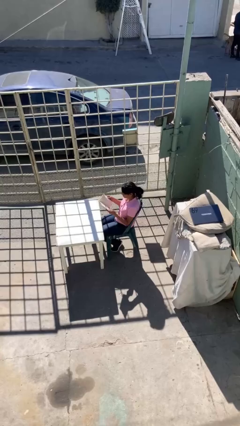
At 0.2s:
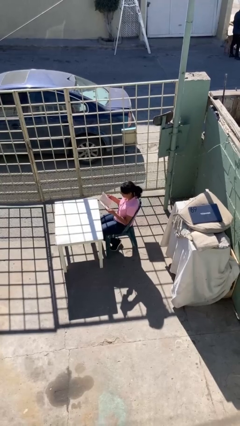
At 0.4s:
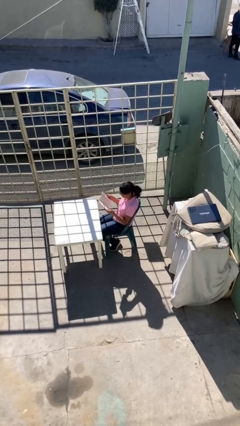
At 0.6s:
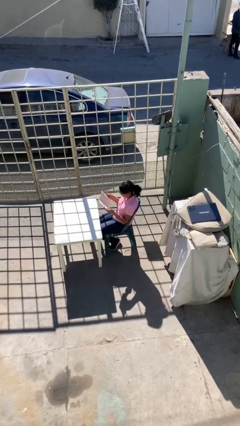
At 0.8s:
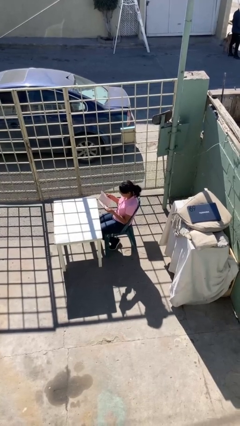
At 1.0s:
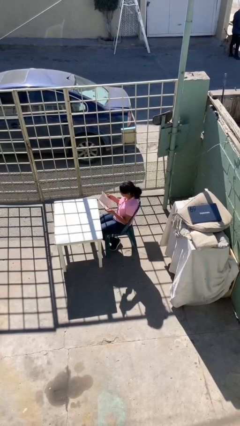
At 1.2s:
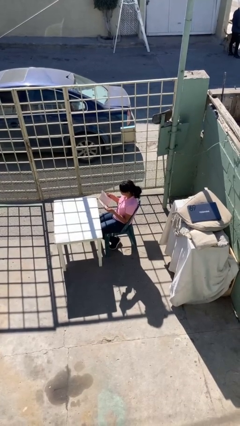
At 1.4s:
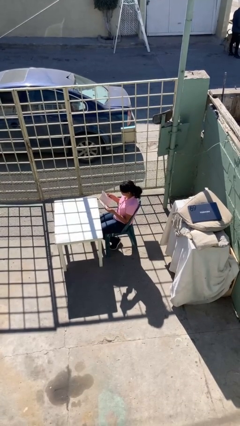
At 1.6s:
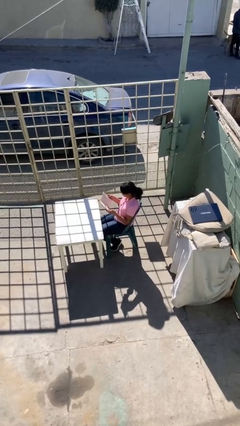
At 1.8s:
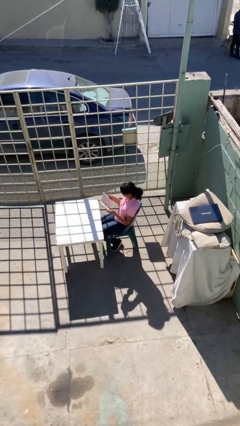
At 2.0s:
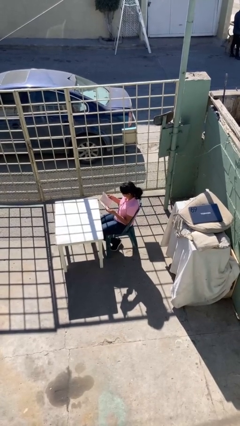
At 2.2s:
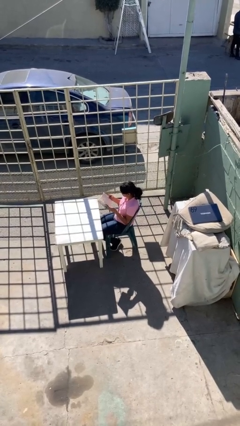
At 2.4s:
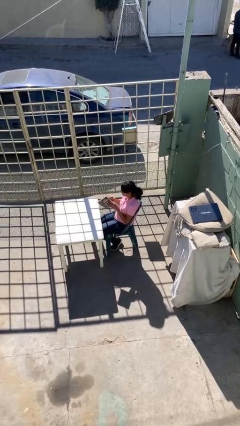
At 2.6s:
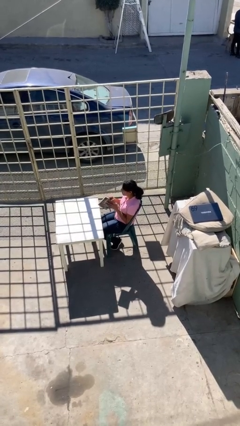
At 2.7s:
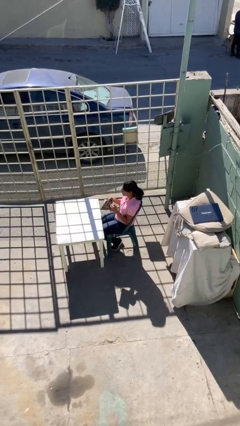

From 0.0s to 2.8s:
person reads document

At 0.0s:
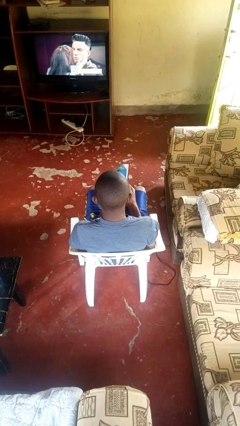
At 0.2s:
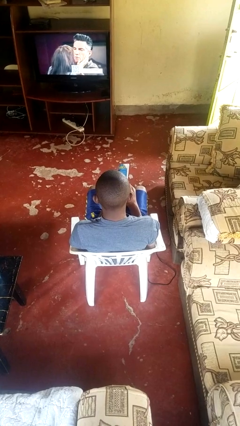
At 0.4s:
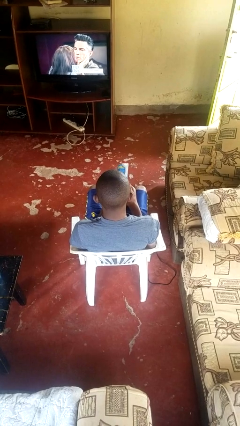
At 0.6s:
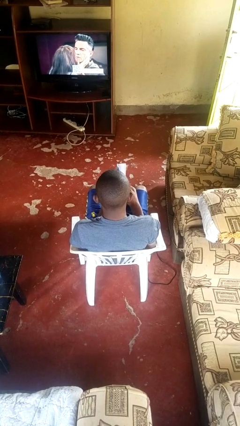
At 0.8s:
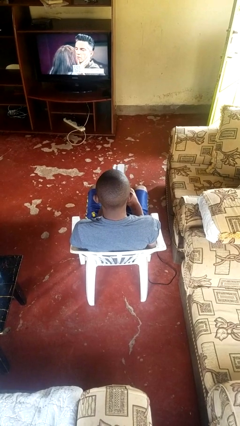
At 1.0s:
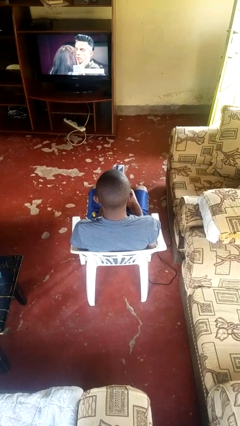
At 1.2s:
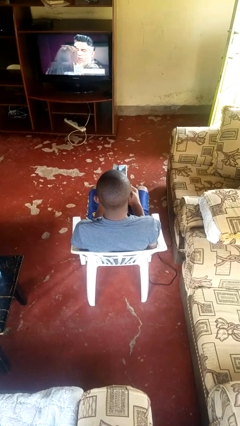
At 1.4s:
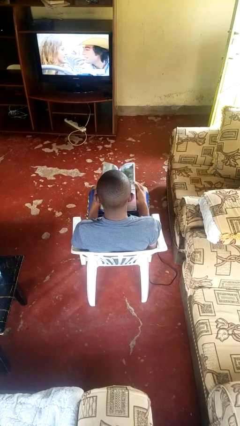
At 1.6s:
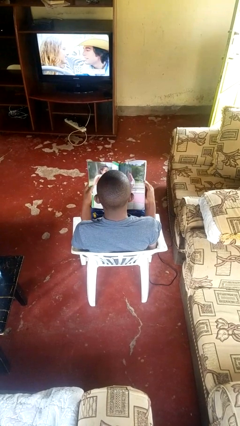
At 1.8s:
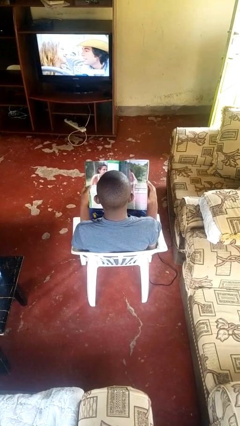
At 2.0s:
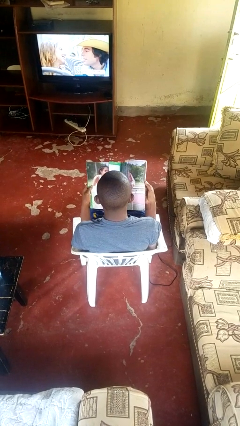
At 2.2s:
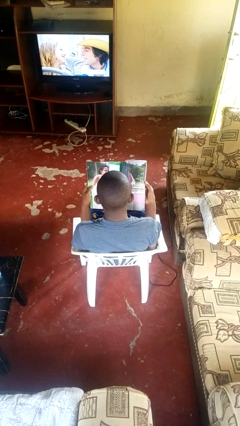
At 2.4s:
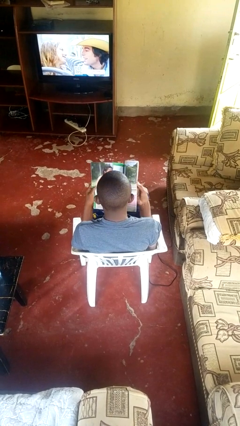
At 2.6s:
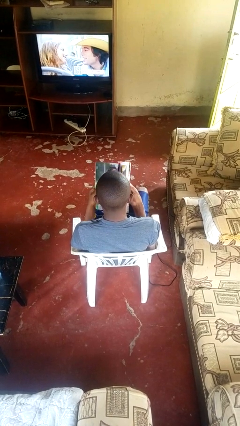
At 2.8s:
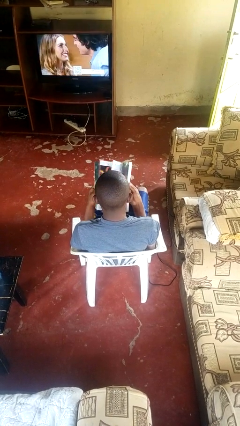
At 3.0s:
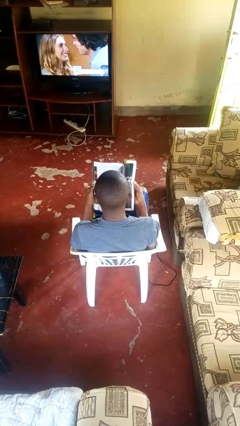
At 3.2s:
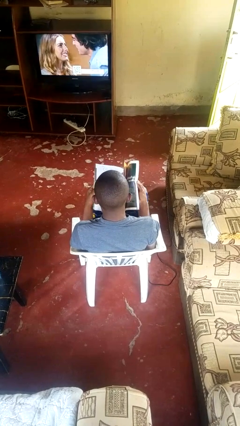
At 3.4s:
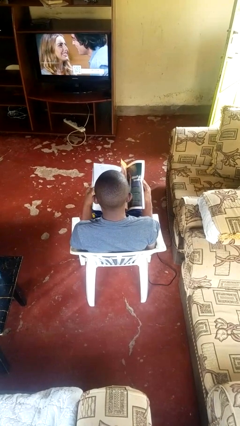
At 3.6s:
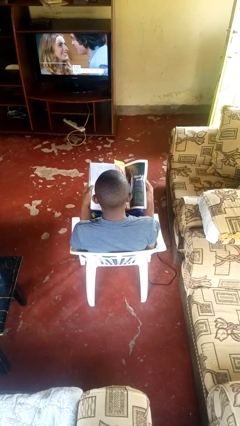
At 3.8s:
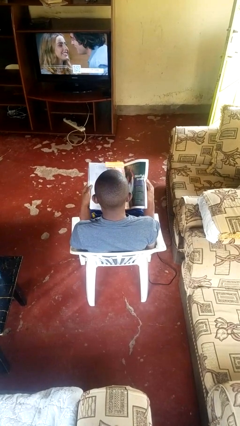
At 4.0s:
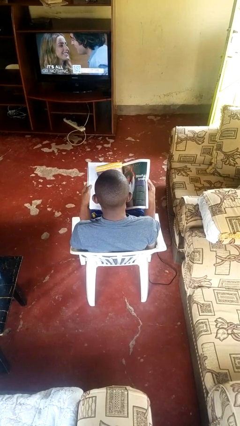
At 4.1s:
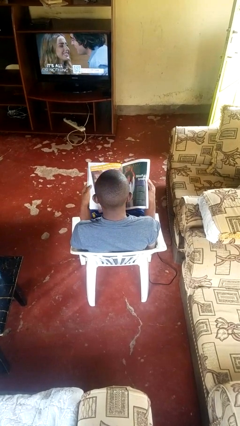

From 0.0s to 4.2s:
person reads magazine

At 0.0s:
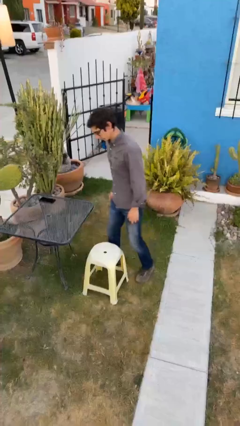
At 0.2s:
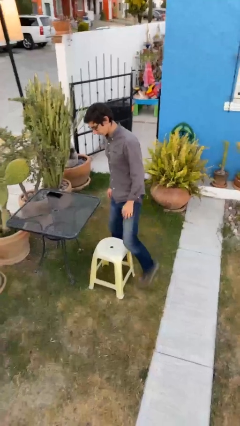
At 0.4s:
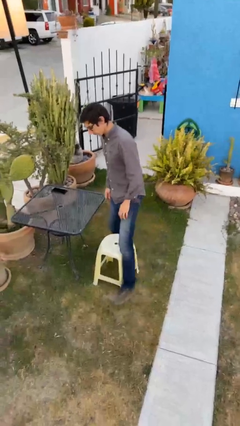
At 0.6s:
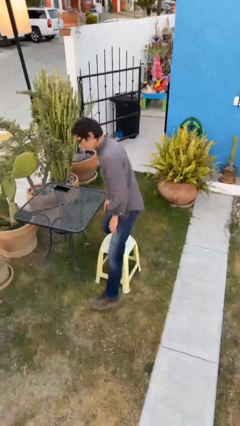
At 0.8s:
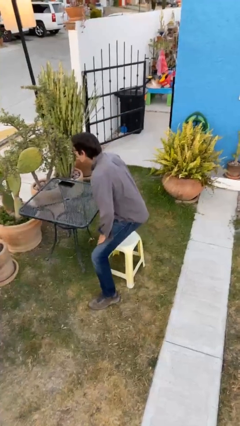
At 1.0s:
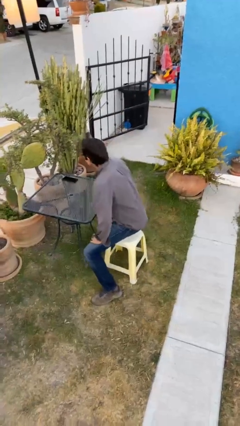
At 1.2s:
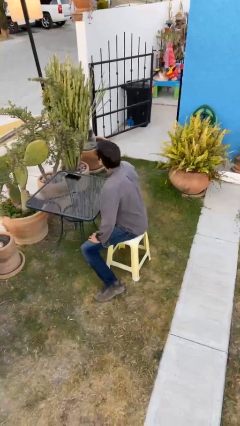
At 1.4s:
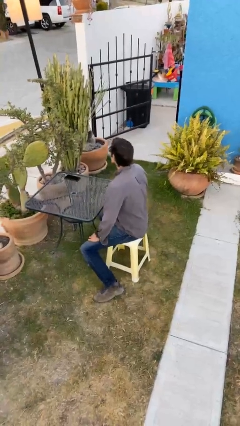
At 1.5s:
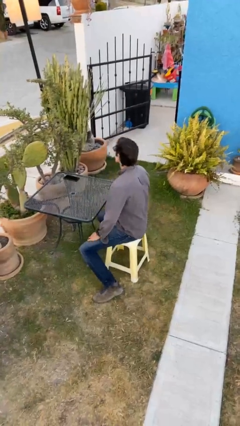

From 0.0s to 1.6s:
person sits down

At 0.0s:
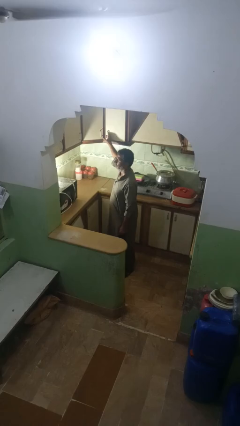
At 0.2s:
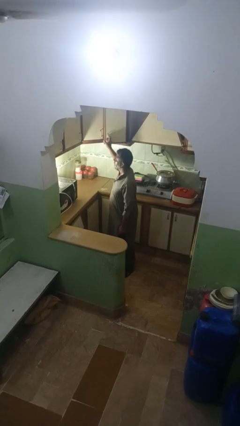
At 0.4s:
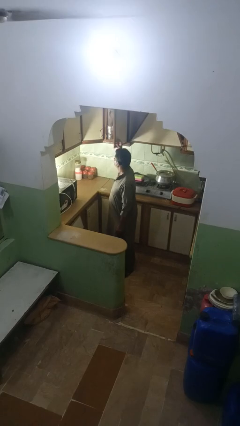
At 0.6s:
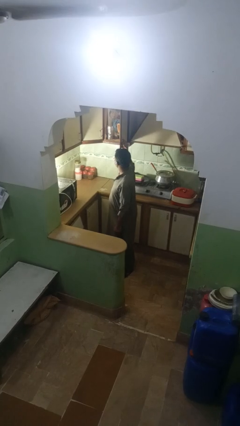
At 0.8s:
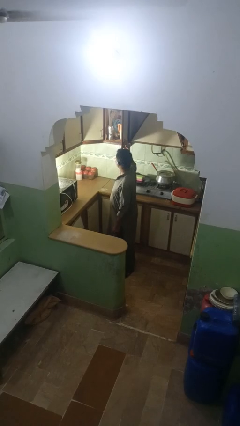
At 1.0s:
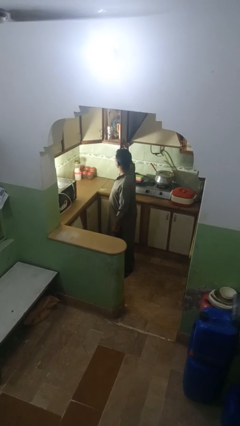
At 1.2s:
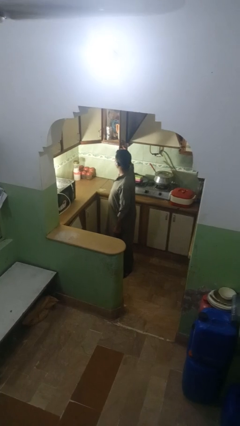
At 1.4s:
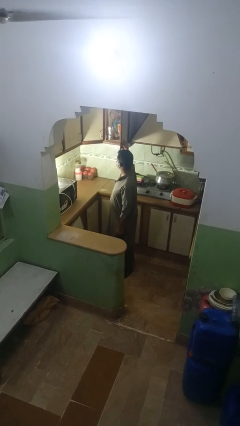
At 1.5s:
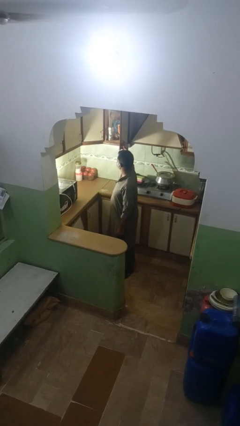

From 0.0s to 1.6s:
person opens kitchen drawer

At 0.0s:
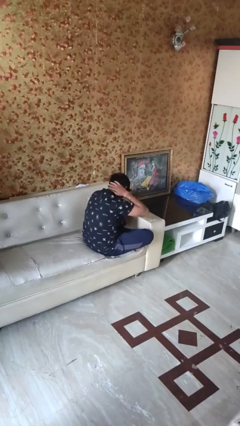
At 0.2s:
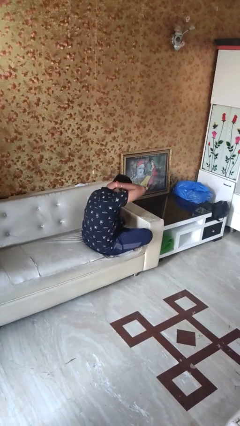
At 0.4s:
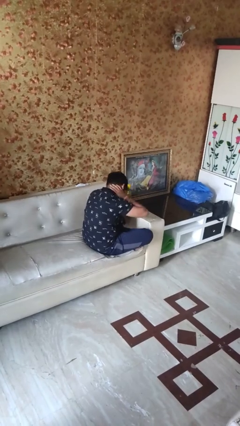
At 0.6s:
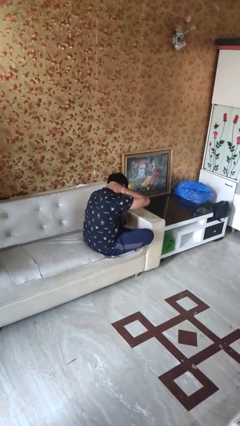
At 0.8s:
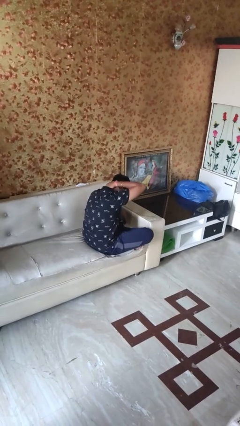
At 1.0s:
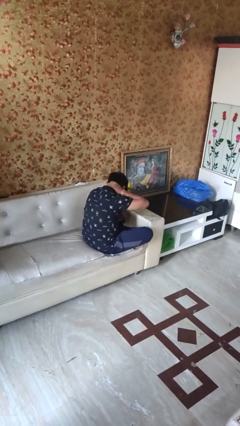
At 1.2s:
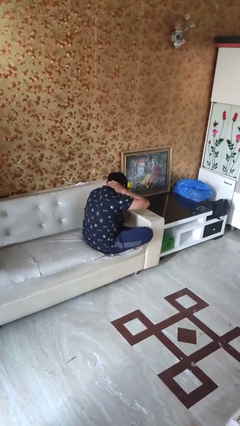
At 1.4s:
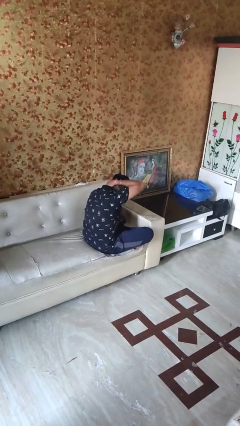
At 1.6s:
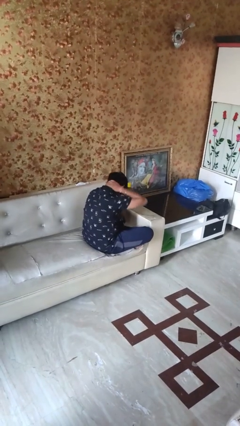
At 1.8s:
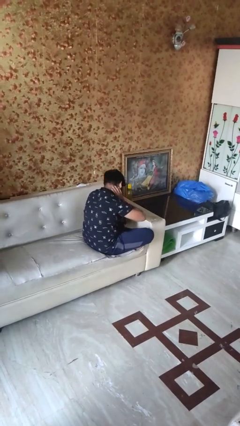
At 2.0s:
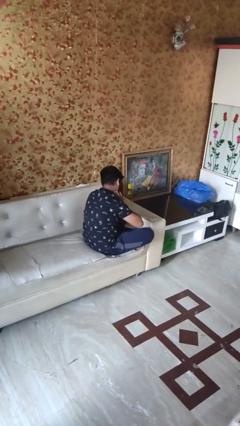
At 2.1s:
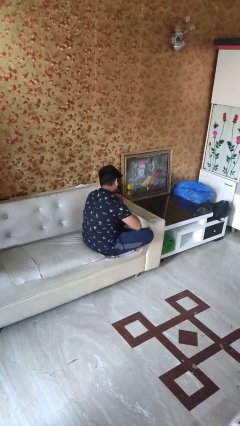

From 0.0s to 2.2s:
person rubs neck

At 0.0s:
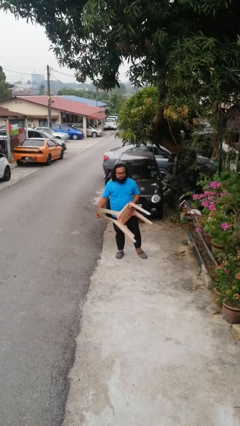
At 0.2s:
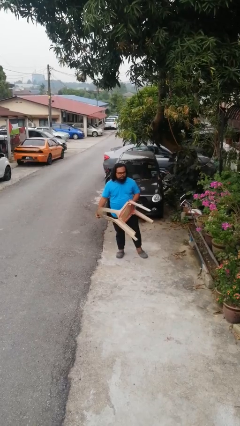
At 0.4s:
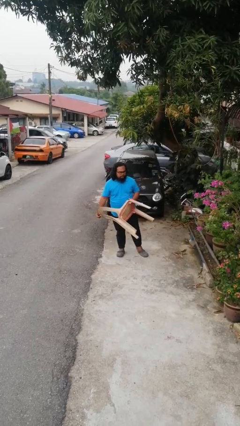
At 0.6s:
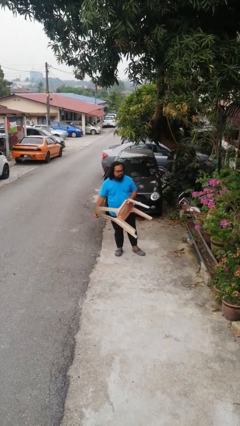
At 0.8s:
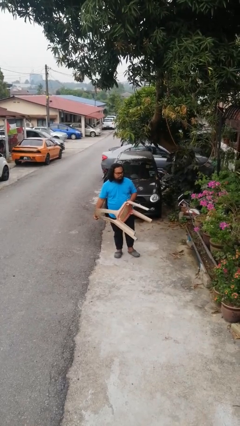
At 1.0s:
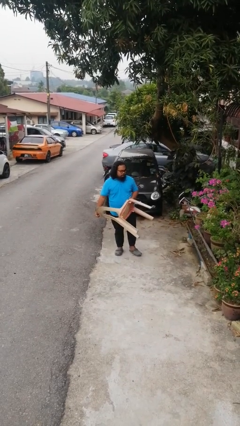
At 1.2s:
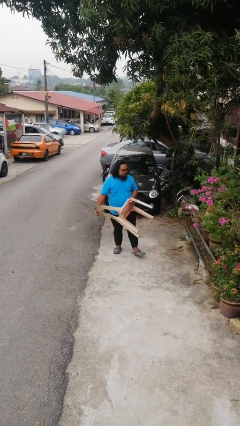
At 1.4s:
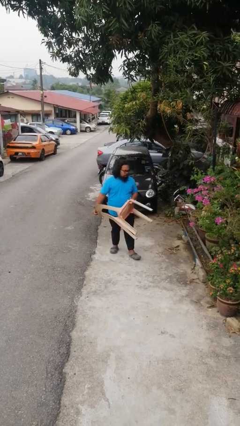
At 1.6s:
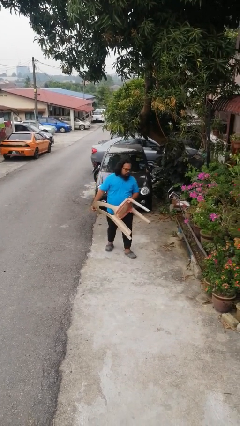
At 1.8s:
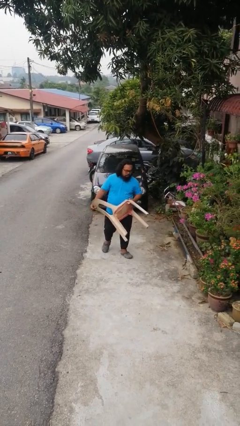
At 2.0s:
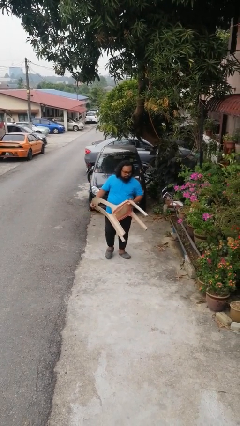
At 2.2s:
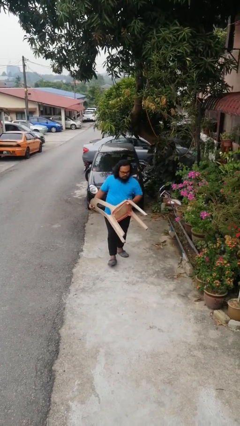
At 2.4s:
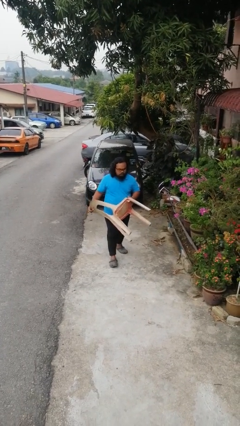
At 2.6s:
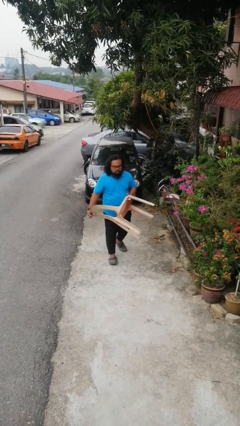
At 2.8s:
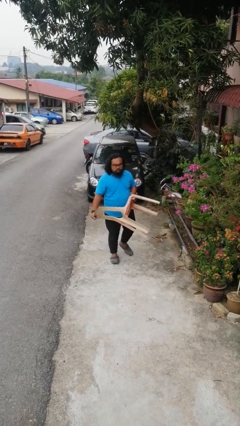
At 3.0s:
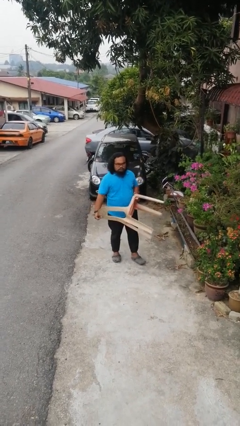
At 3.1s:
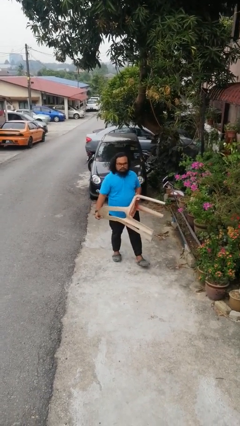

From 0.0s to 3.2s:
person carries furniture

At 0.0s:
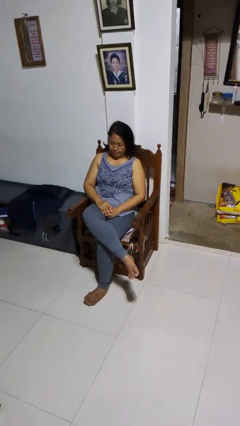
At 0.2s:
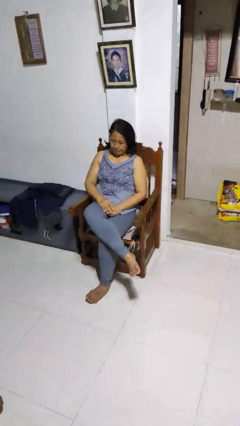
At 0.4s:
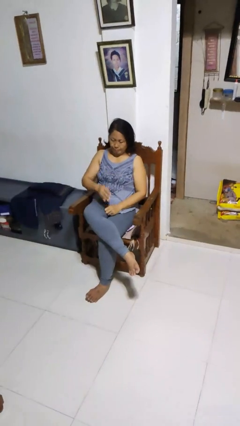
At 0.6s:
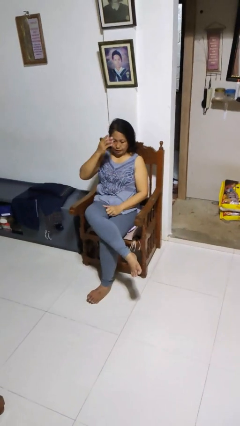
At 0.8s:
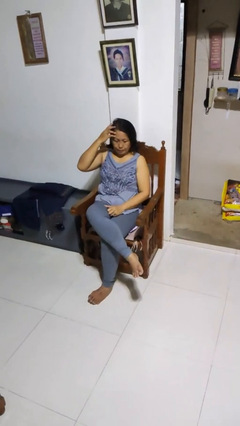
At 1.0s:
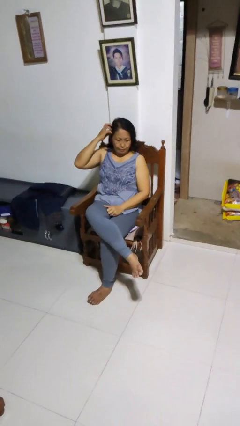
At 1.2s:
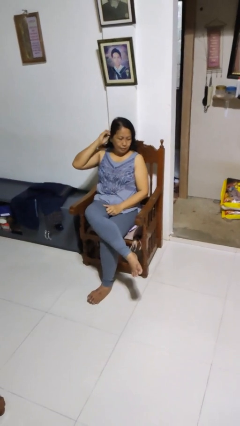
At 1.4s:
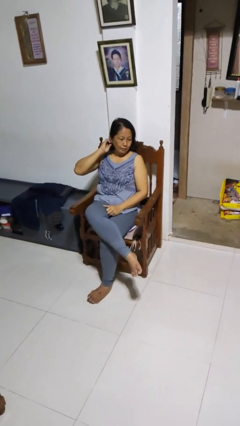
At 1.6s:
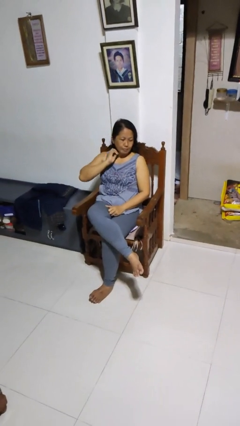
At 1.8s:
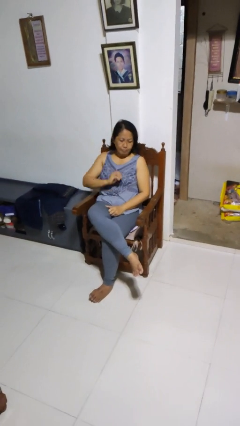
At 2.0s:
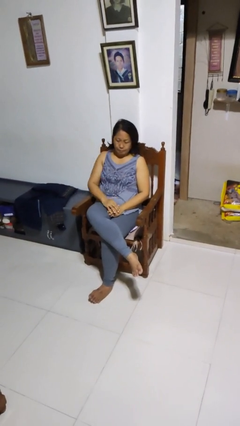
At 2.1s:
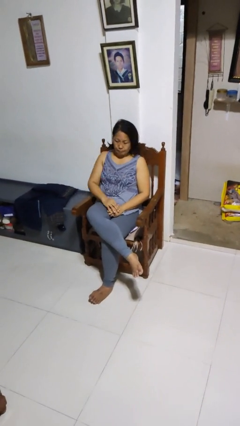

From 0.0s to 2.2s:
person strokes hair
